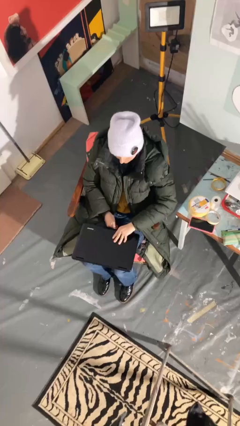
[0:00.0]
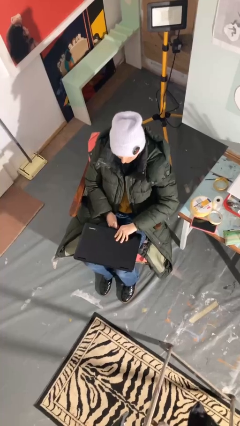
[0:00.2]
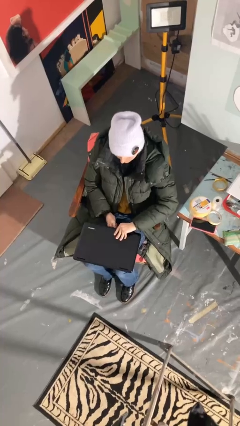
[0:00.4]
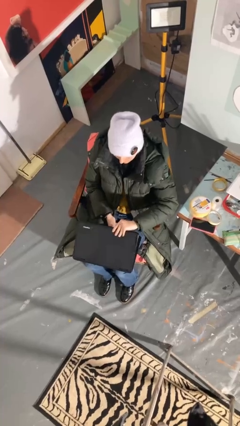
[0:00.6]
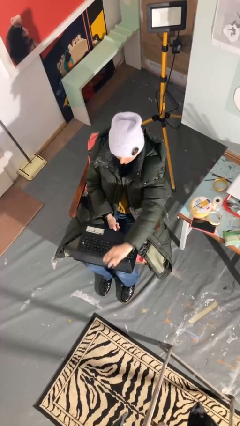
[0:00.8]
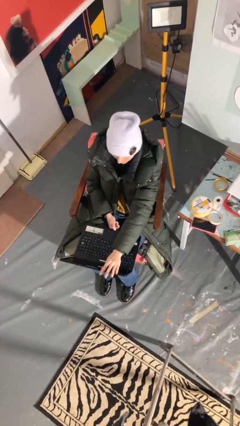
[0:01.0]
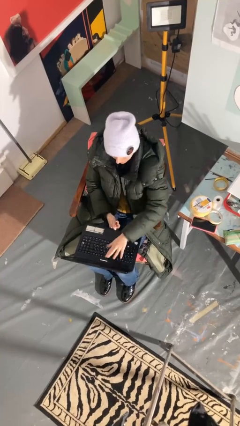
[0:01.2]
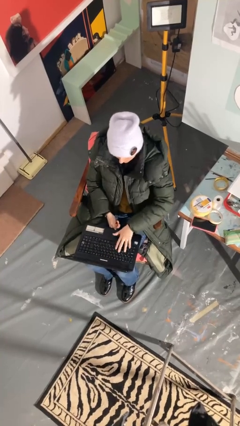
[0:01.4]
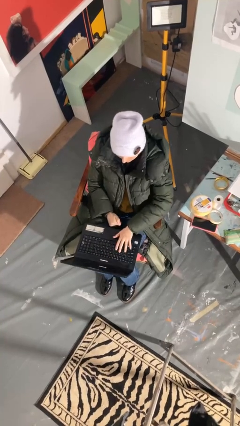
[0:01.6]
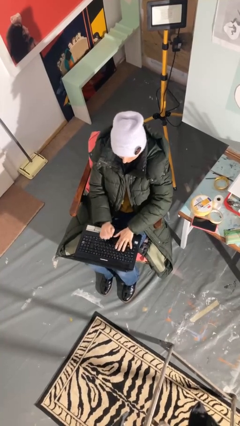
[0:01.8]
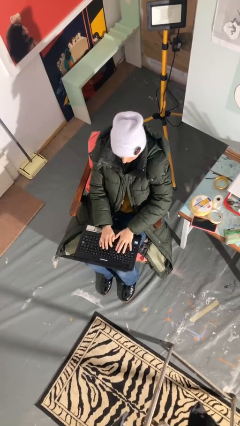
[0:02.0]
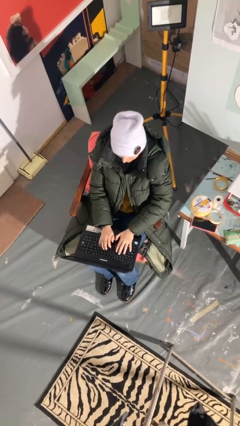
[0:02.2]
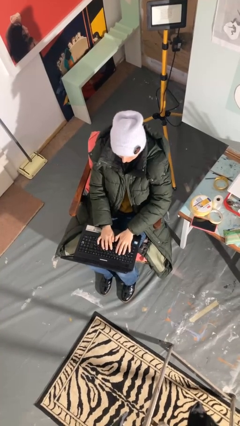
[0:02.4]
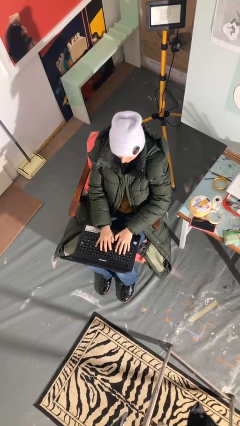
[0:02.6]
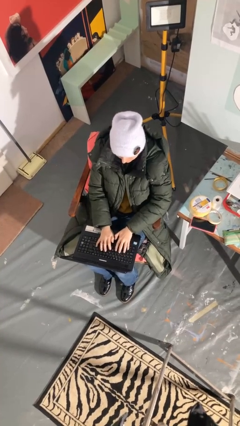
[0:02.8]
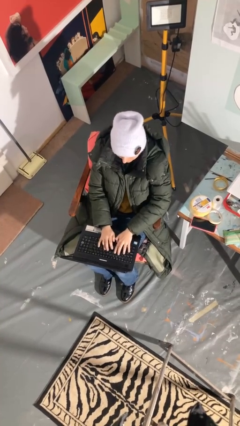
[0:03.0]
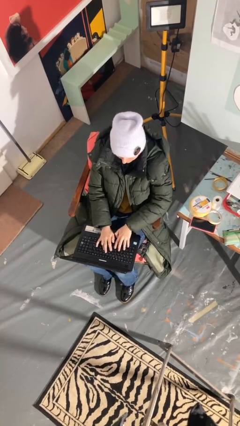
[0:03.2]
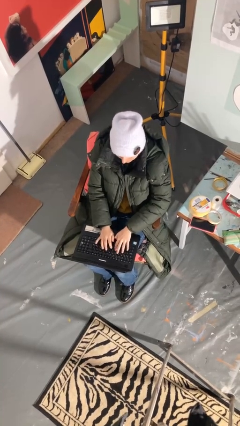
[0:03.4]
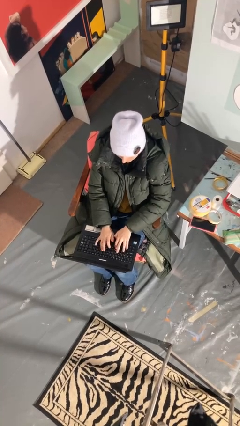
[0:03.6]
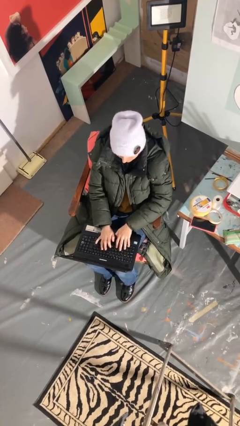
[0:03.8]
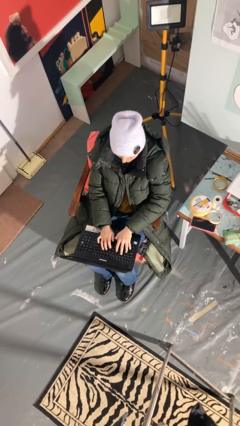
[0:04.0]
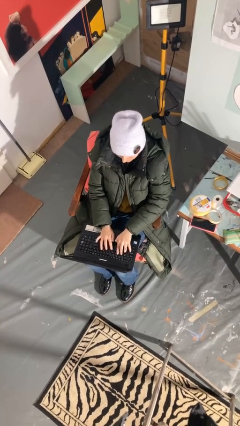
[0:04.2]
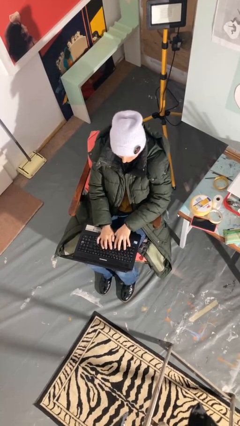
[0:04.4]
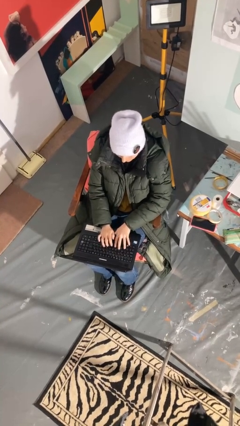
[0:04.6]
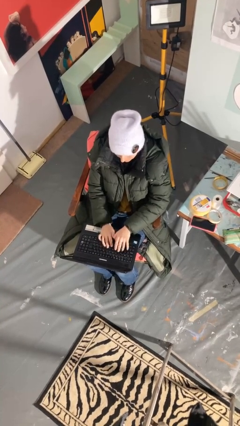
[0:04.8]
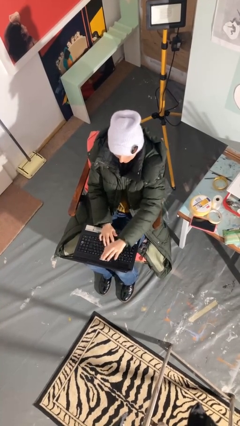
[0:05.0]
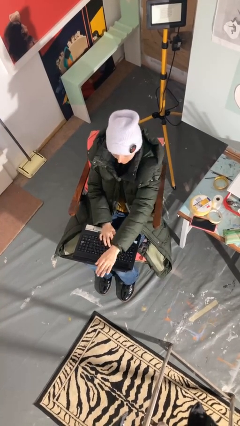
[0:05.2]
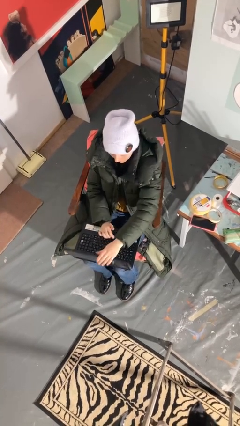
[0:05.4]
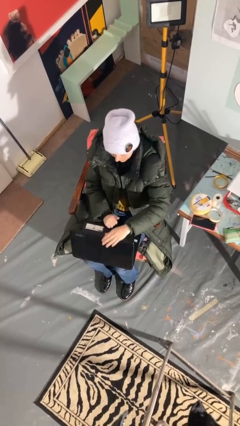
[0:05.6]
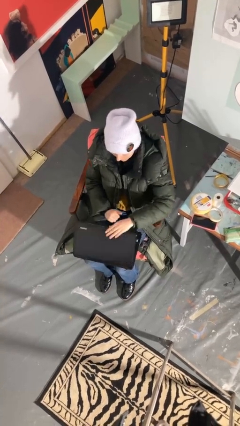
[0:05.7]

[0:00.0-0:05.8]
person interacts with laptop

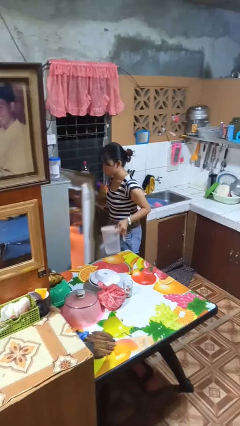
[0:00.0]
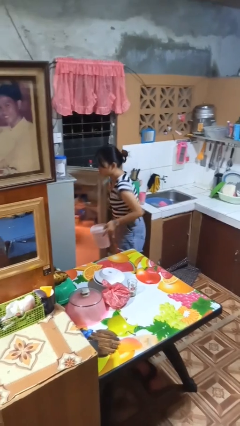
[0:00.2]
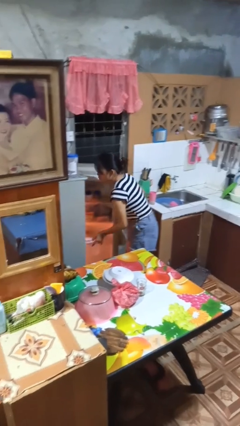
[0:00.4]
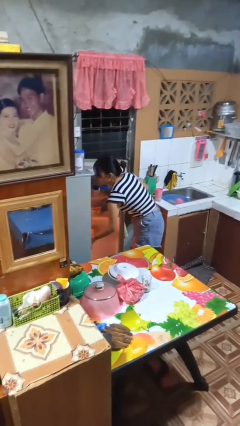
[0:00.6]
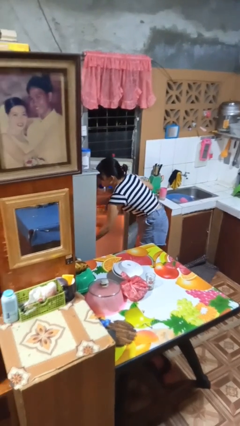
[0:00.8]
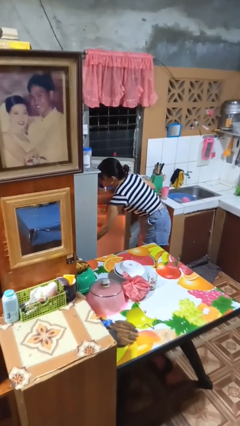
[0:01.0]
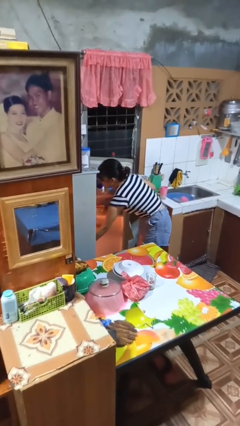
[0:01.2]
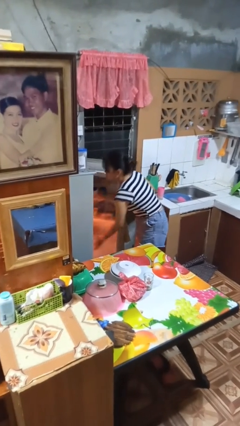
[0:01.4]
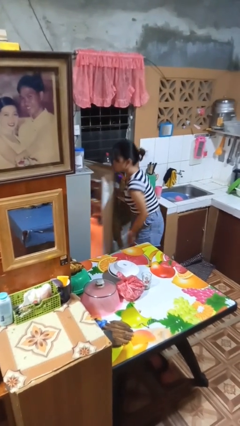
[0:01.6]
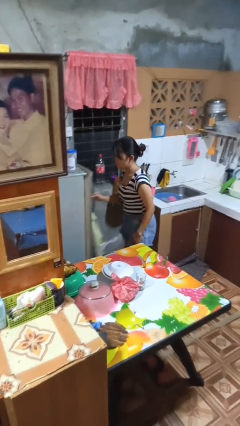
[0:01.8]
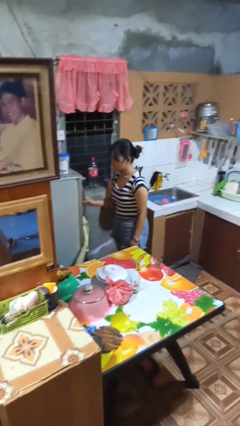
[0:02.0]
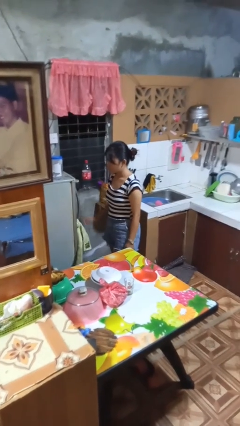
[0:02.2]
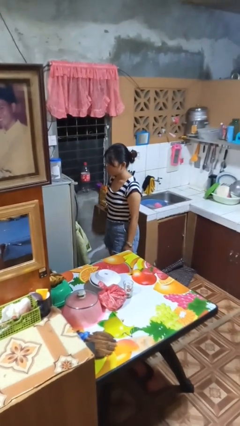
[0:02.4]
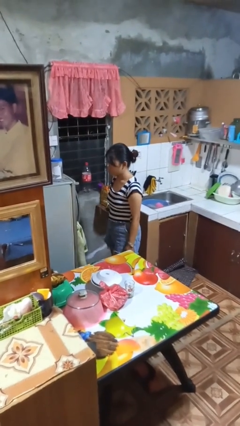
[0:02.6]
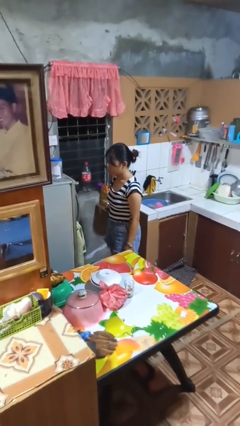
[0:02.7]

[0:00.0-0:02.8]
person puts object into refrigerator

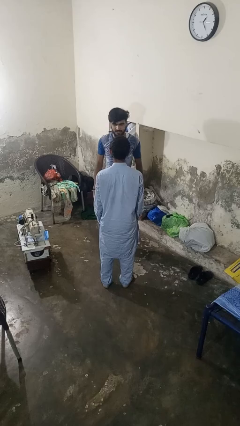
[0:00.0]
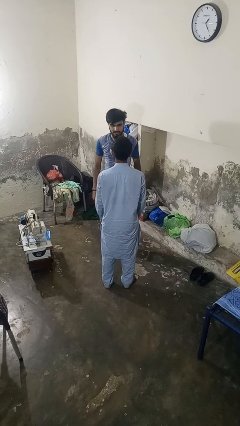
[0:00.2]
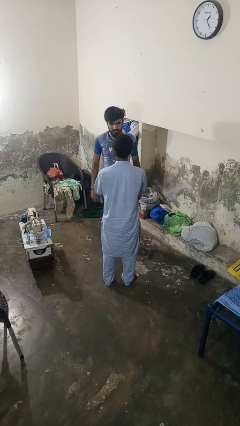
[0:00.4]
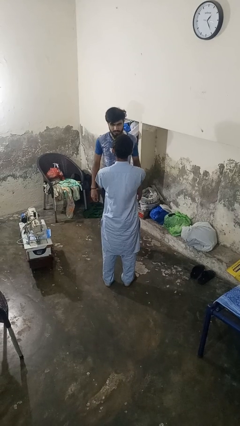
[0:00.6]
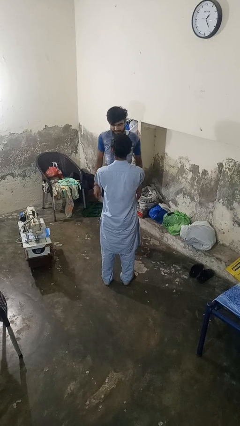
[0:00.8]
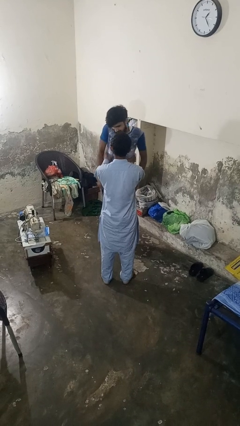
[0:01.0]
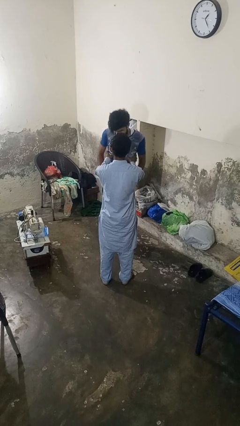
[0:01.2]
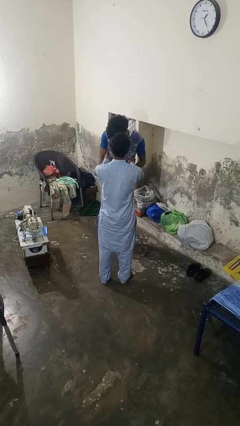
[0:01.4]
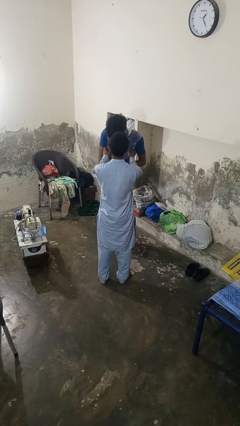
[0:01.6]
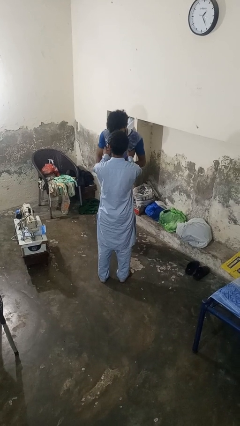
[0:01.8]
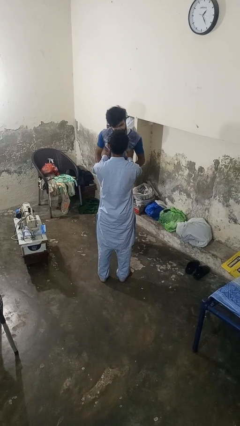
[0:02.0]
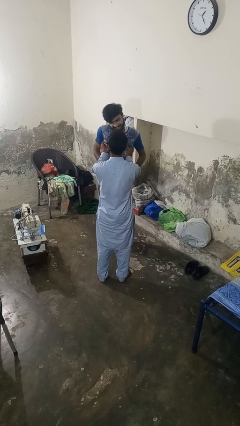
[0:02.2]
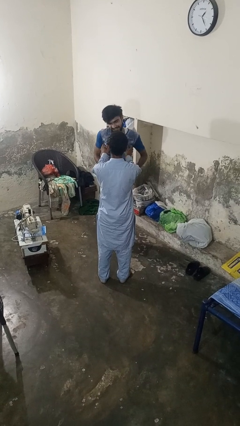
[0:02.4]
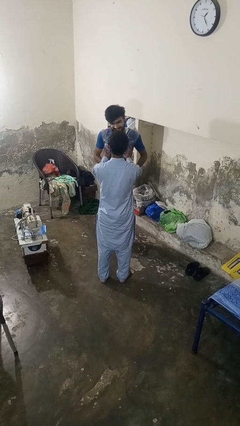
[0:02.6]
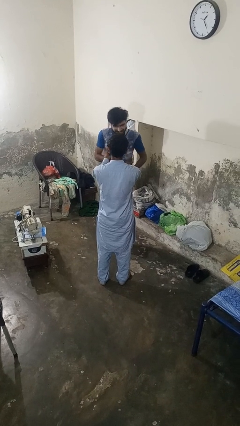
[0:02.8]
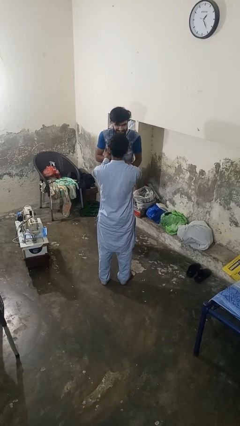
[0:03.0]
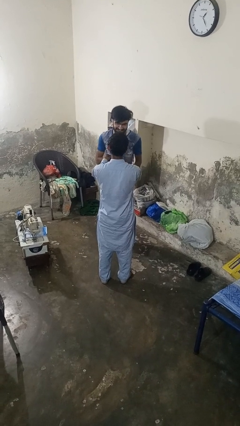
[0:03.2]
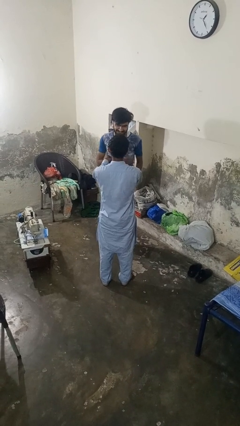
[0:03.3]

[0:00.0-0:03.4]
person tickles person

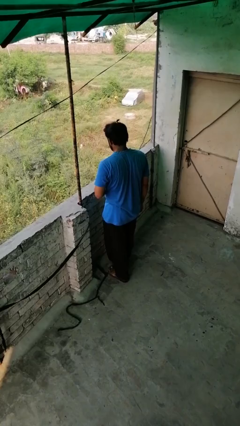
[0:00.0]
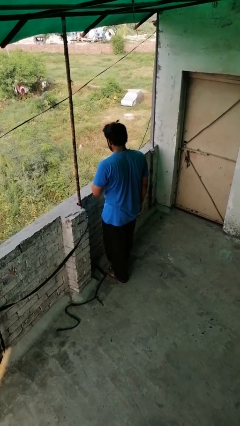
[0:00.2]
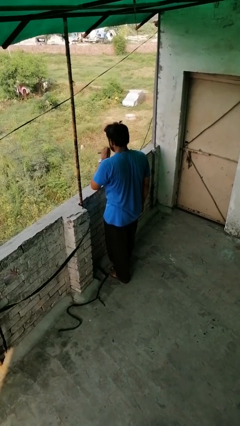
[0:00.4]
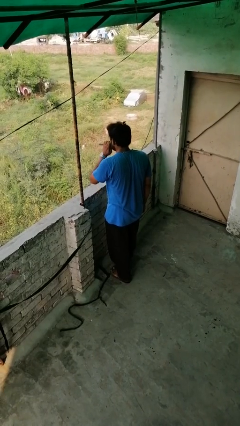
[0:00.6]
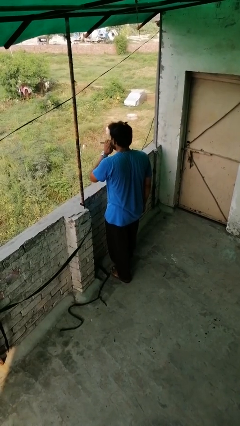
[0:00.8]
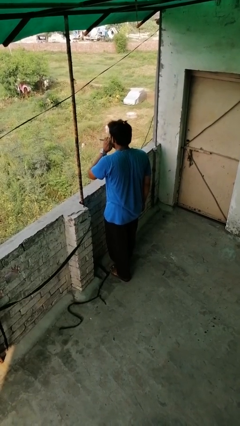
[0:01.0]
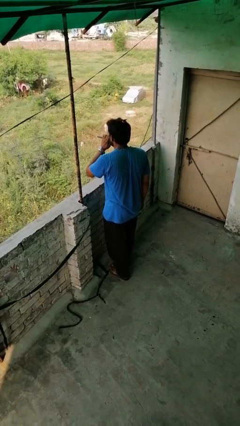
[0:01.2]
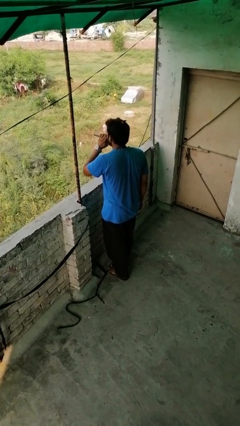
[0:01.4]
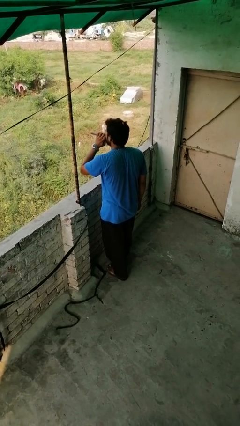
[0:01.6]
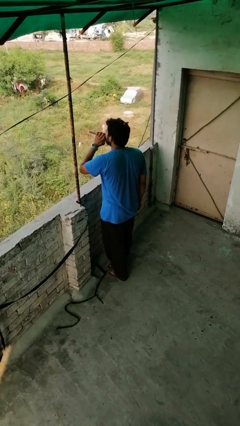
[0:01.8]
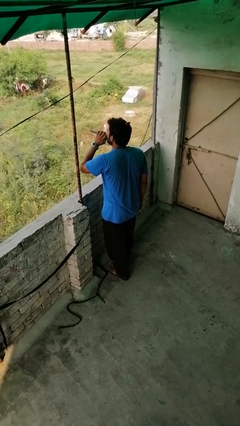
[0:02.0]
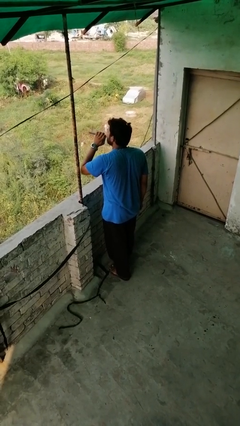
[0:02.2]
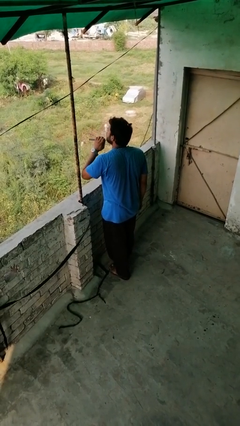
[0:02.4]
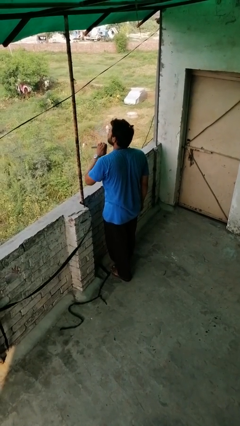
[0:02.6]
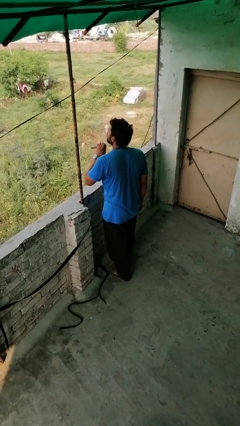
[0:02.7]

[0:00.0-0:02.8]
person vapes

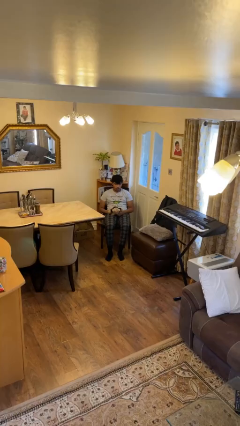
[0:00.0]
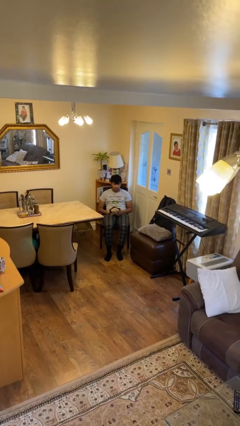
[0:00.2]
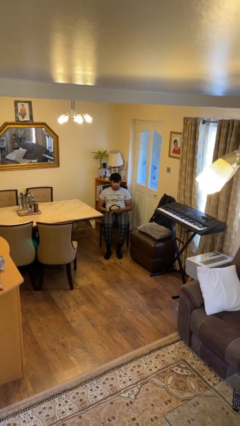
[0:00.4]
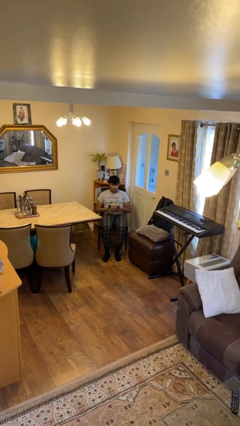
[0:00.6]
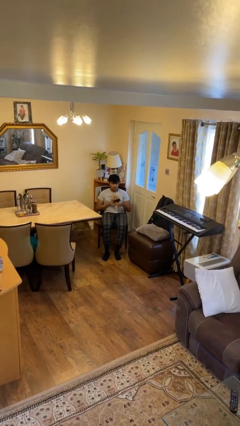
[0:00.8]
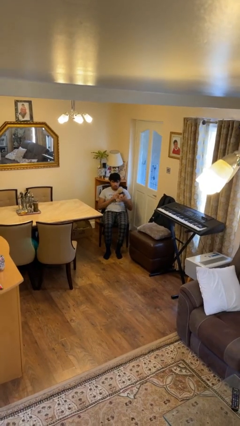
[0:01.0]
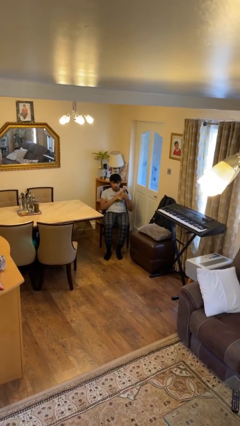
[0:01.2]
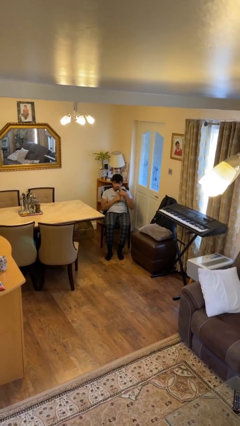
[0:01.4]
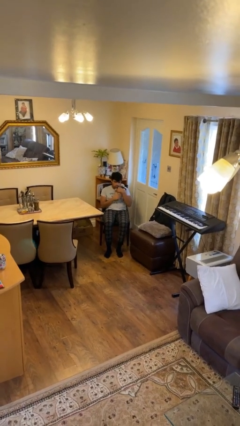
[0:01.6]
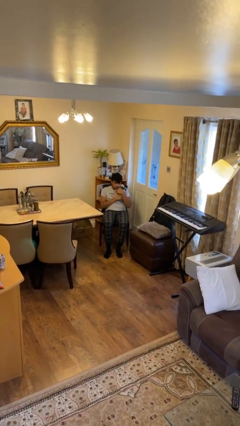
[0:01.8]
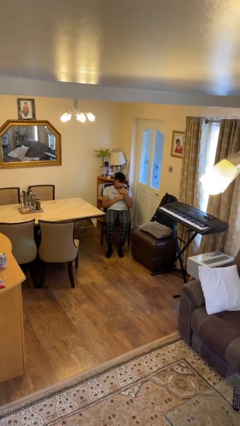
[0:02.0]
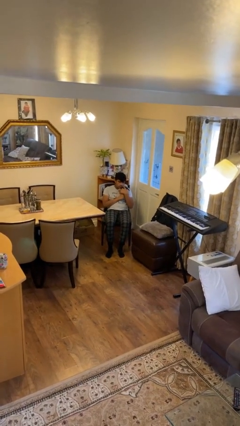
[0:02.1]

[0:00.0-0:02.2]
person hugs stuffed animal

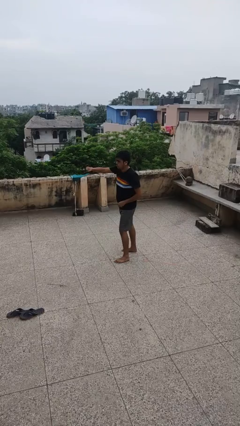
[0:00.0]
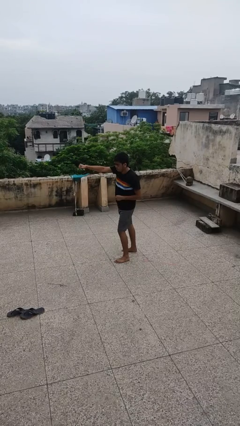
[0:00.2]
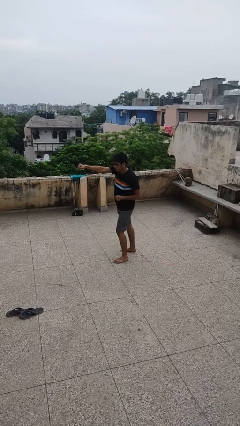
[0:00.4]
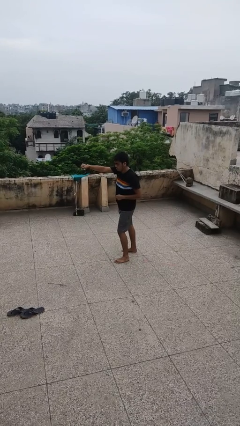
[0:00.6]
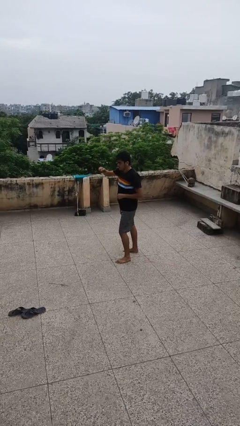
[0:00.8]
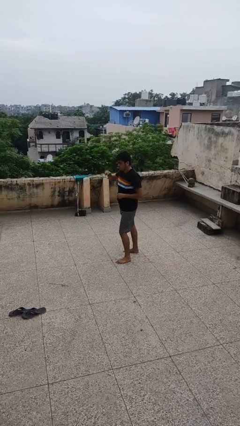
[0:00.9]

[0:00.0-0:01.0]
person punches
